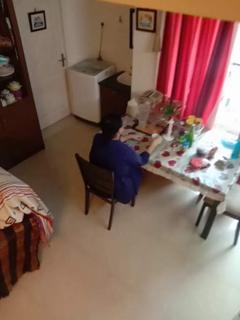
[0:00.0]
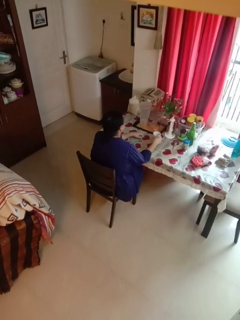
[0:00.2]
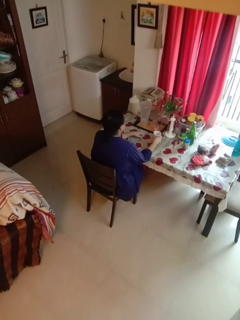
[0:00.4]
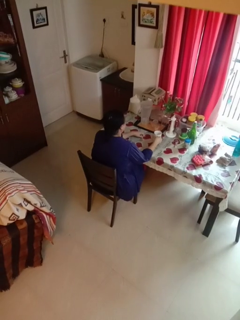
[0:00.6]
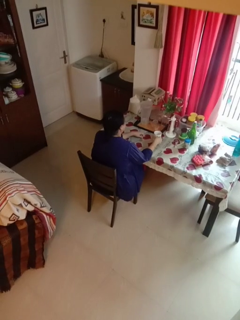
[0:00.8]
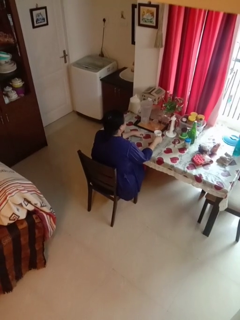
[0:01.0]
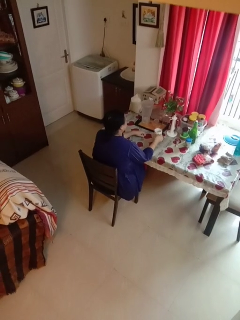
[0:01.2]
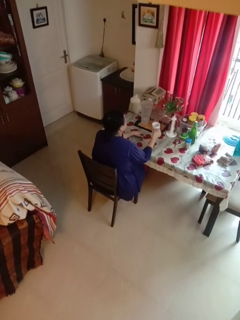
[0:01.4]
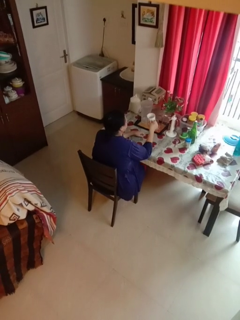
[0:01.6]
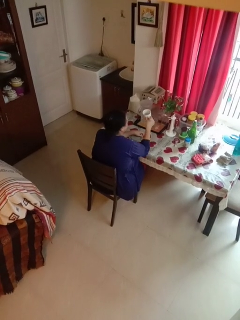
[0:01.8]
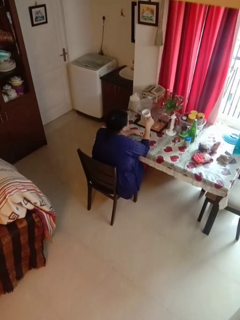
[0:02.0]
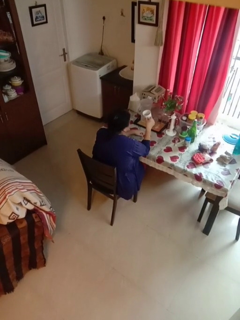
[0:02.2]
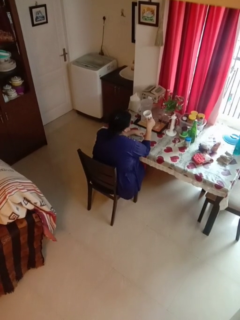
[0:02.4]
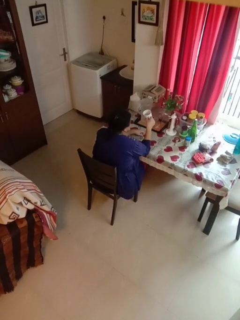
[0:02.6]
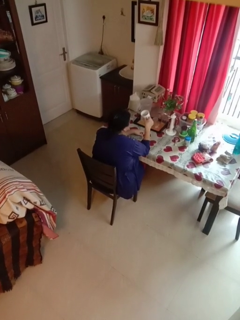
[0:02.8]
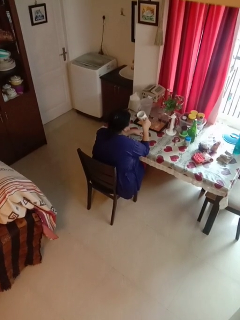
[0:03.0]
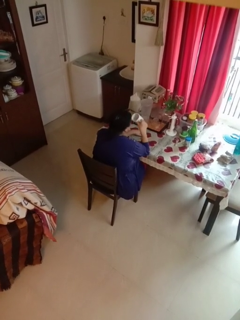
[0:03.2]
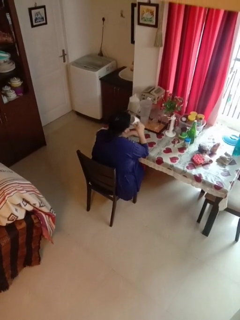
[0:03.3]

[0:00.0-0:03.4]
person picks up object from table

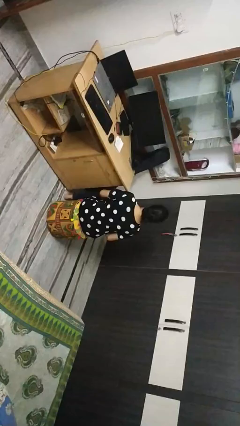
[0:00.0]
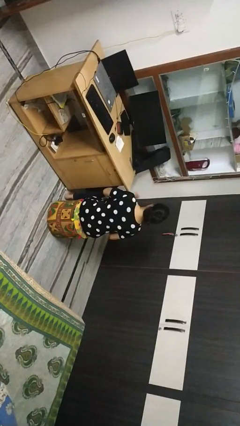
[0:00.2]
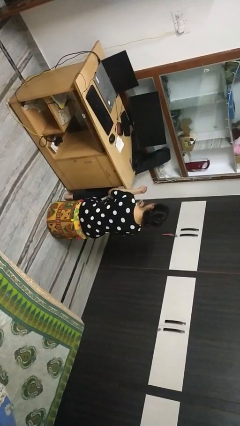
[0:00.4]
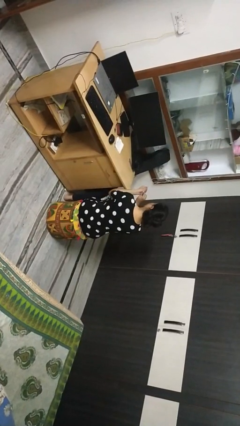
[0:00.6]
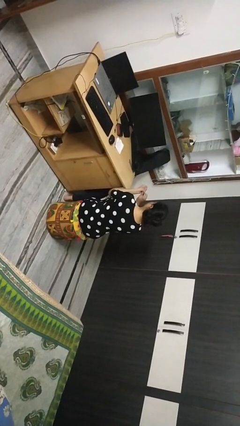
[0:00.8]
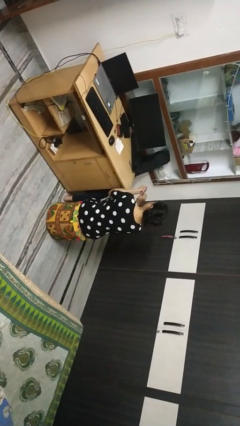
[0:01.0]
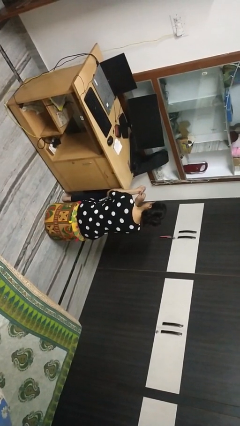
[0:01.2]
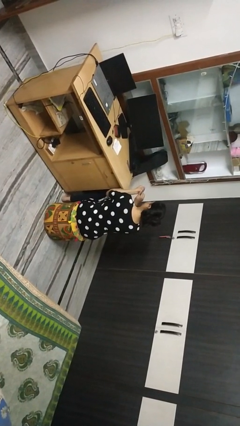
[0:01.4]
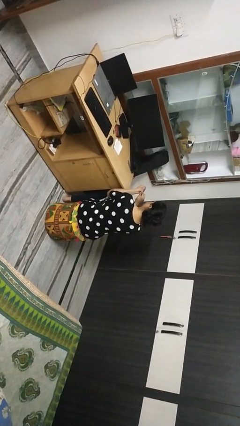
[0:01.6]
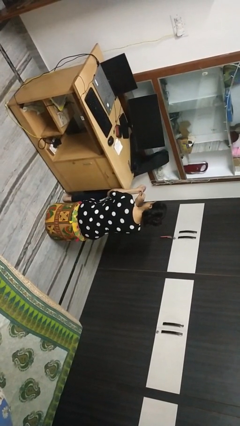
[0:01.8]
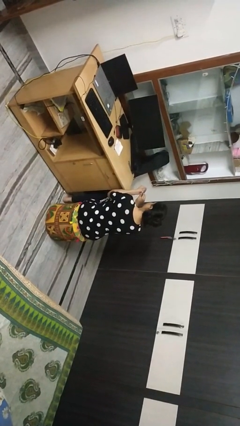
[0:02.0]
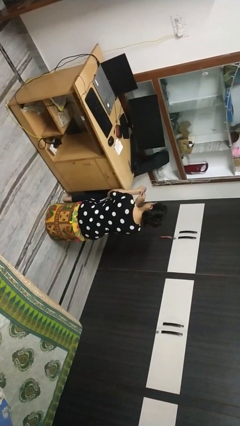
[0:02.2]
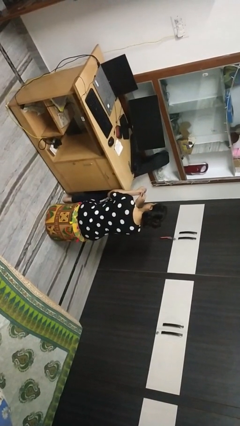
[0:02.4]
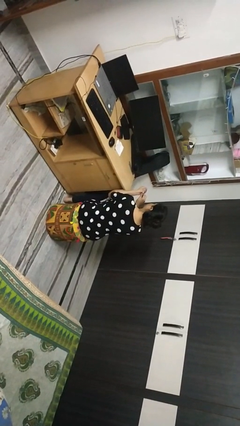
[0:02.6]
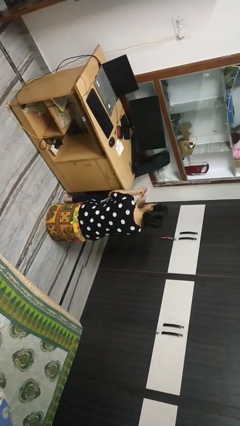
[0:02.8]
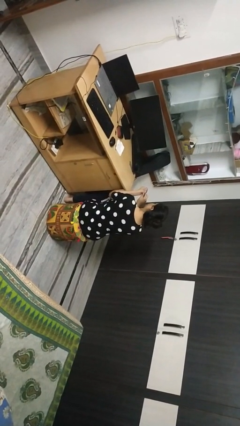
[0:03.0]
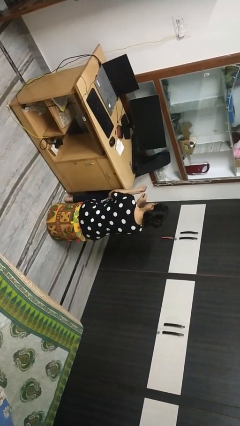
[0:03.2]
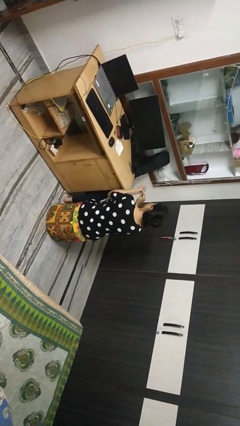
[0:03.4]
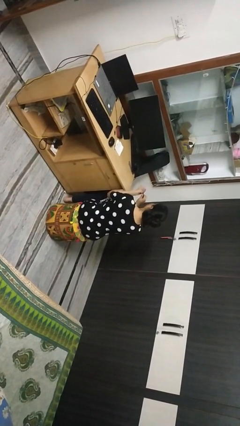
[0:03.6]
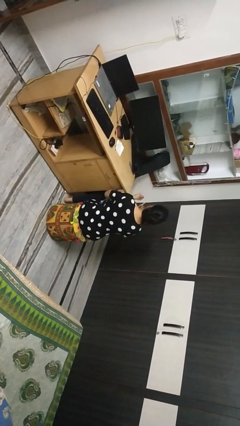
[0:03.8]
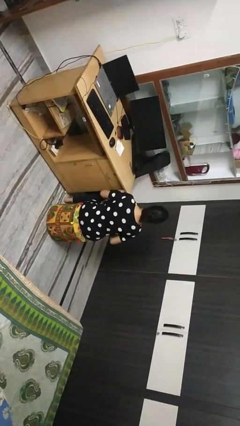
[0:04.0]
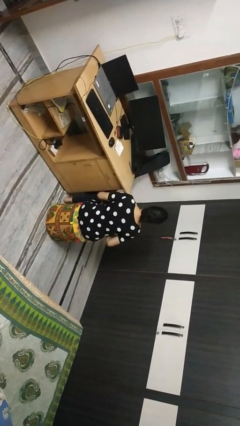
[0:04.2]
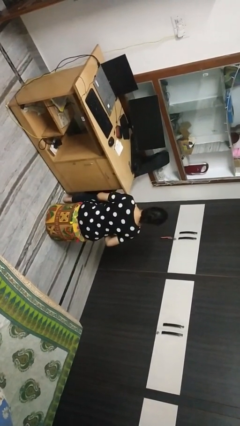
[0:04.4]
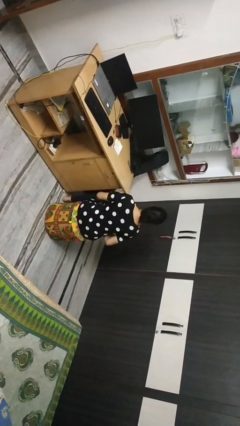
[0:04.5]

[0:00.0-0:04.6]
person files fingernails

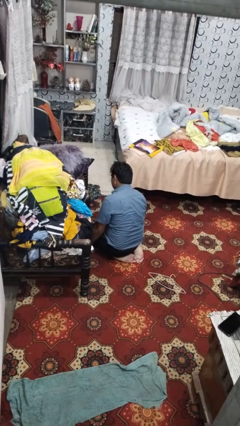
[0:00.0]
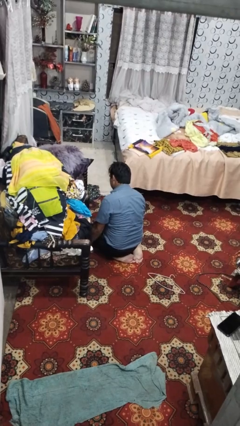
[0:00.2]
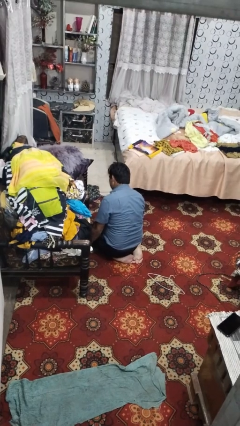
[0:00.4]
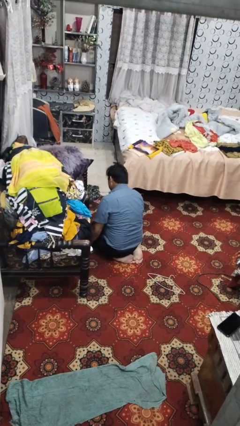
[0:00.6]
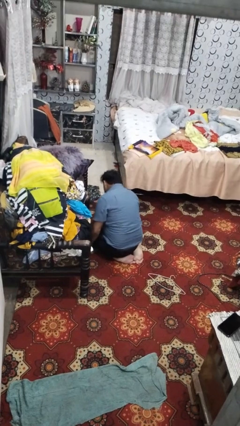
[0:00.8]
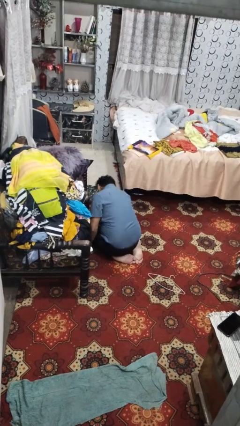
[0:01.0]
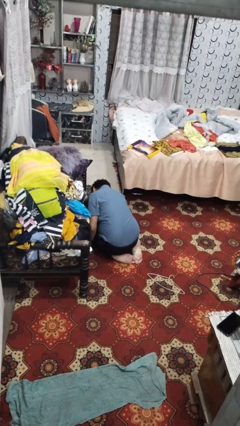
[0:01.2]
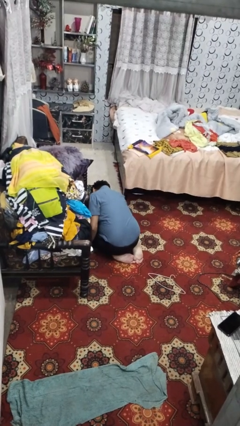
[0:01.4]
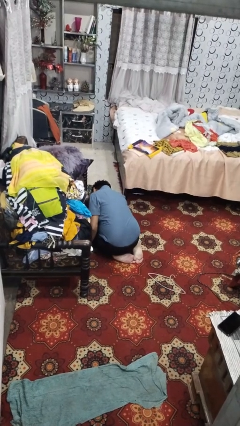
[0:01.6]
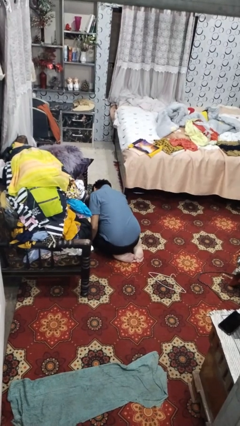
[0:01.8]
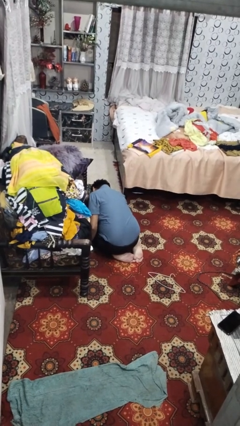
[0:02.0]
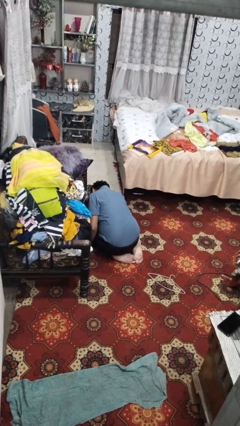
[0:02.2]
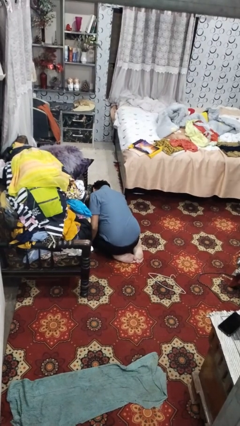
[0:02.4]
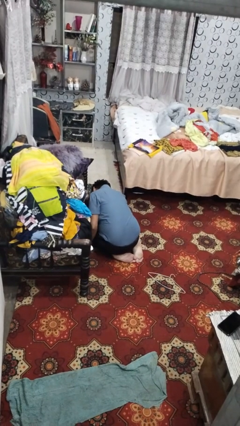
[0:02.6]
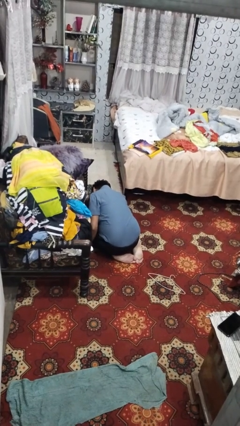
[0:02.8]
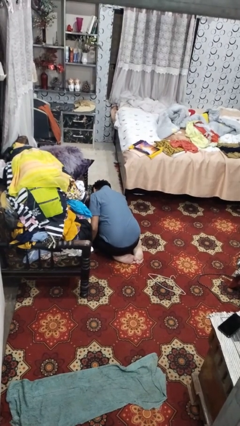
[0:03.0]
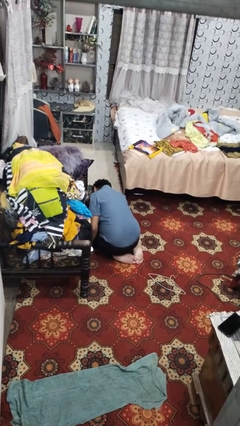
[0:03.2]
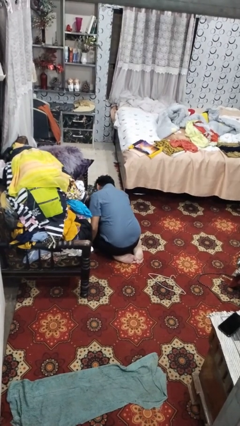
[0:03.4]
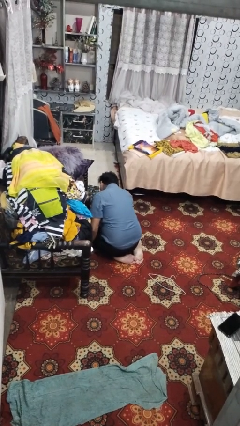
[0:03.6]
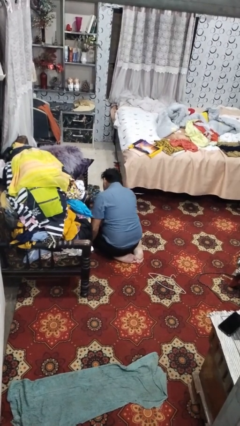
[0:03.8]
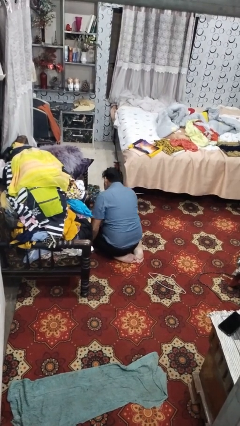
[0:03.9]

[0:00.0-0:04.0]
person searches under couch

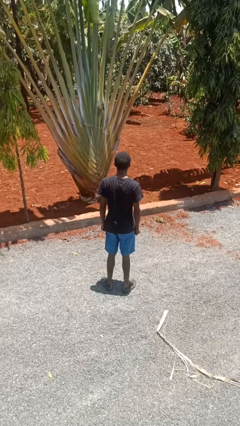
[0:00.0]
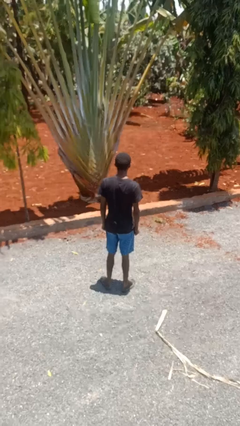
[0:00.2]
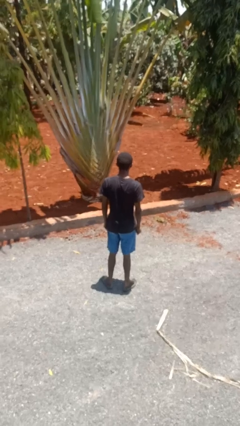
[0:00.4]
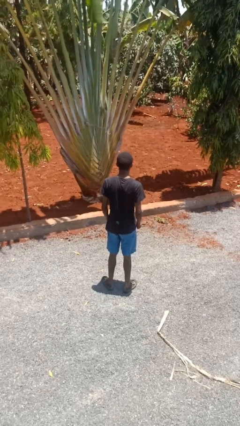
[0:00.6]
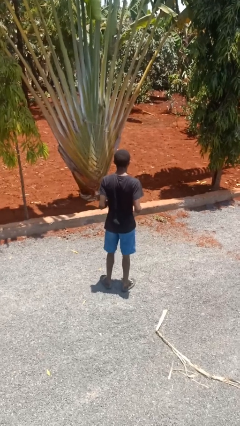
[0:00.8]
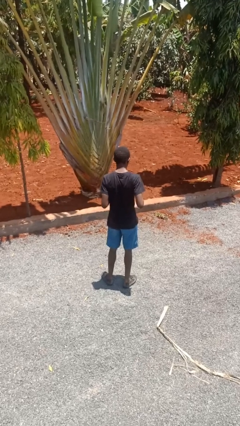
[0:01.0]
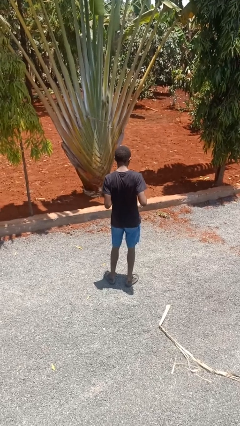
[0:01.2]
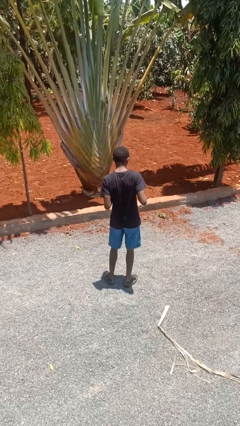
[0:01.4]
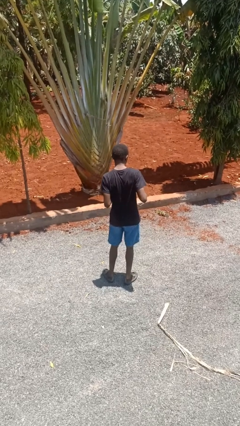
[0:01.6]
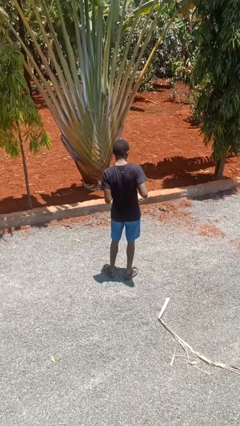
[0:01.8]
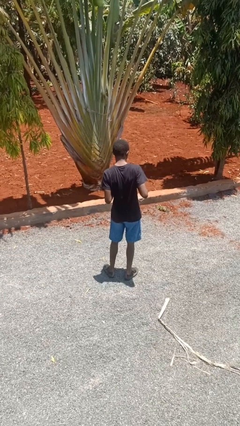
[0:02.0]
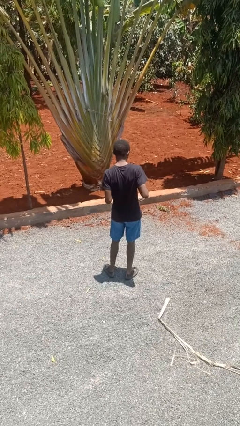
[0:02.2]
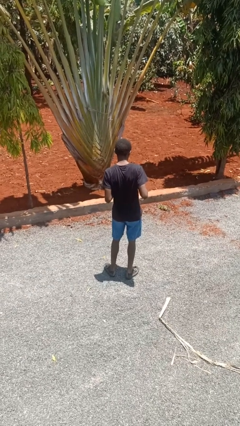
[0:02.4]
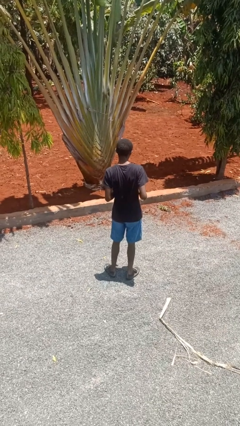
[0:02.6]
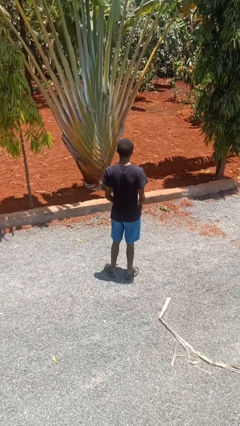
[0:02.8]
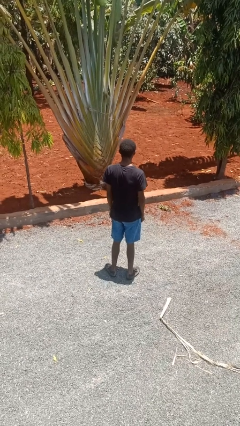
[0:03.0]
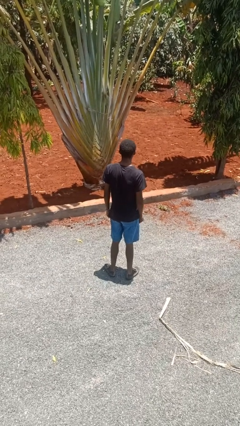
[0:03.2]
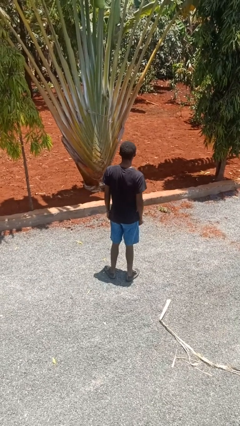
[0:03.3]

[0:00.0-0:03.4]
person wiggles hips

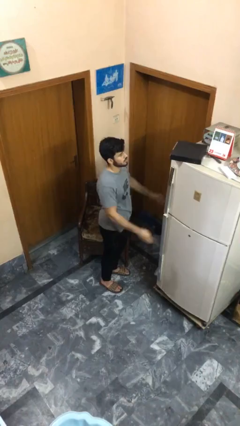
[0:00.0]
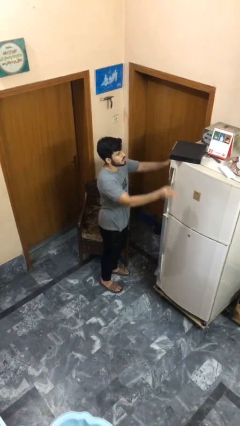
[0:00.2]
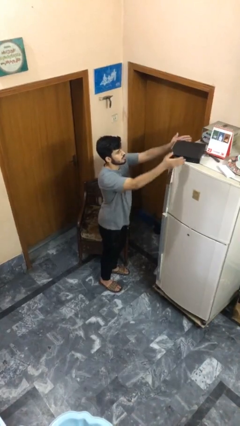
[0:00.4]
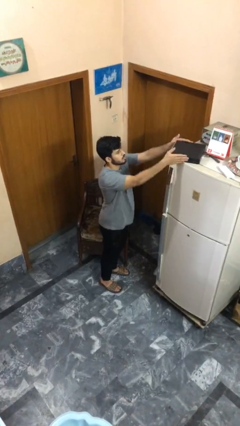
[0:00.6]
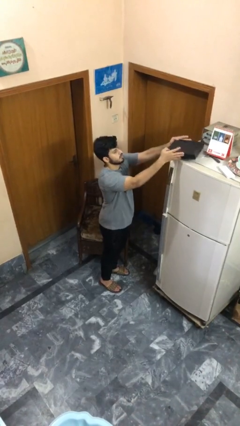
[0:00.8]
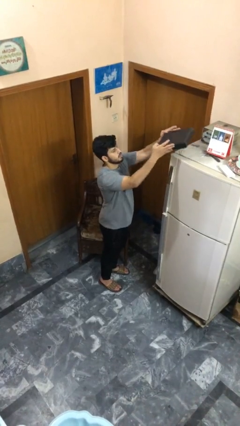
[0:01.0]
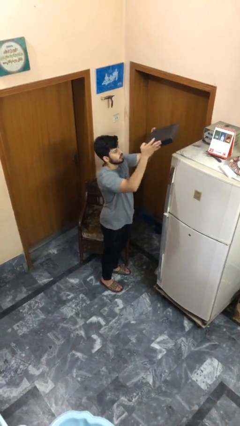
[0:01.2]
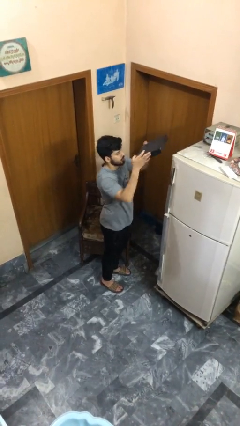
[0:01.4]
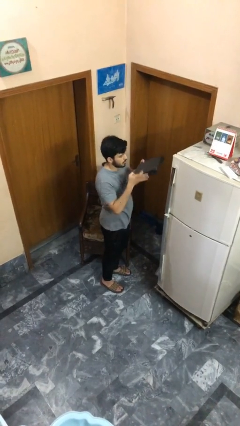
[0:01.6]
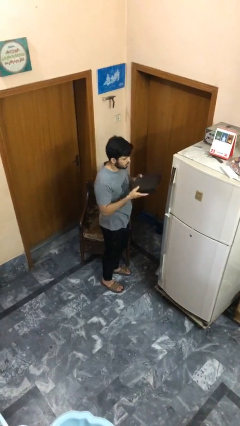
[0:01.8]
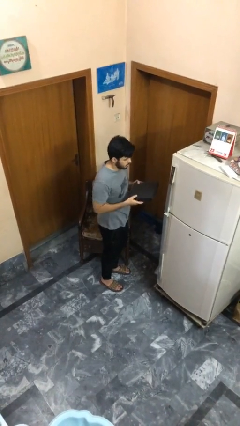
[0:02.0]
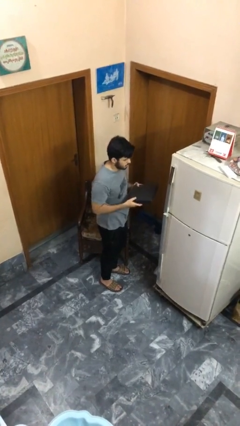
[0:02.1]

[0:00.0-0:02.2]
person picks up object from countertop

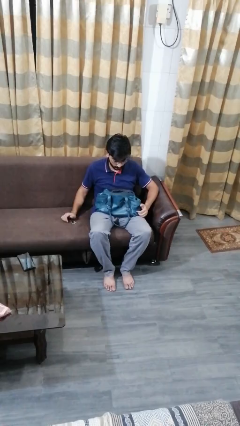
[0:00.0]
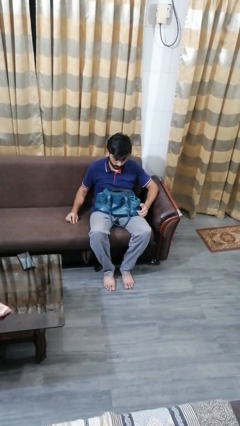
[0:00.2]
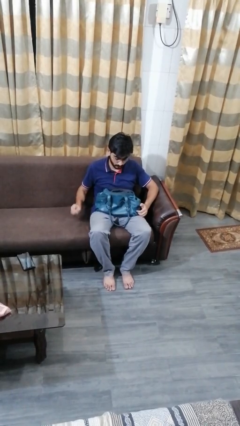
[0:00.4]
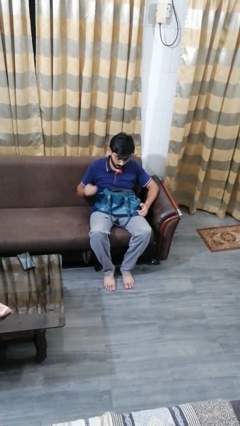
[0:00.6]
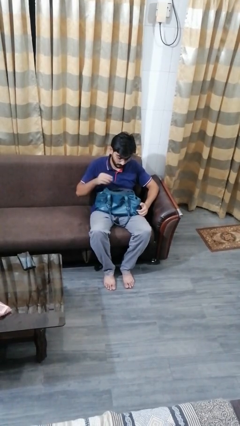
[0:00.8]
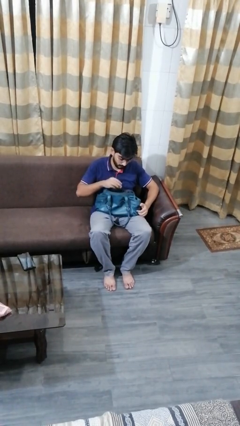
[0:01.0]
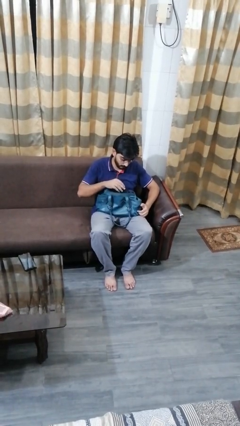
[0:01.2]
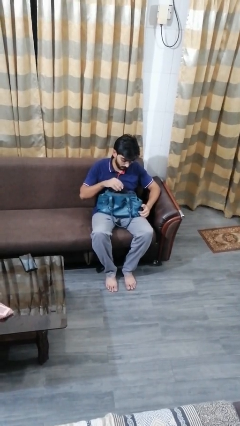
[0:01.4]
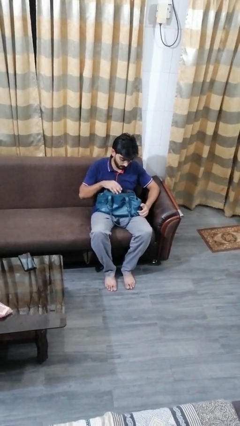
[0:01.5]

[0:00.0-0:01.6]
person puts object into purse
